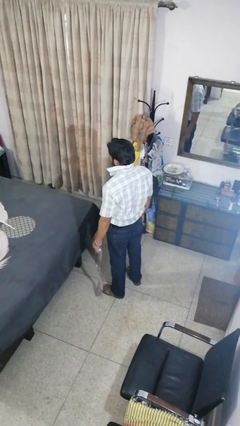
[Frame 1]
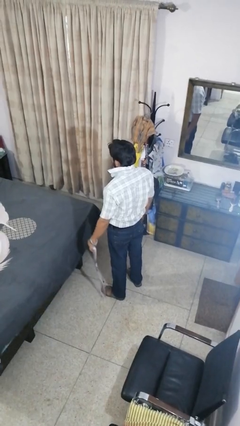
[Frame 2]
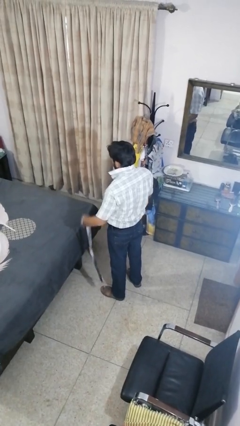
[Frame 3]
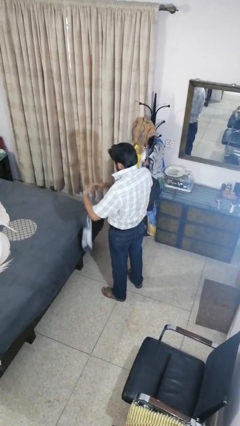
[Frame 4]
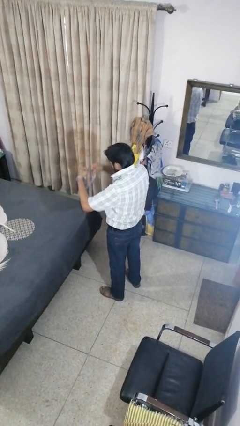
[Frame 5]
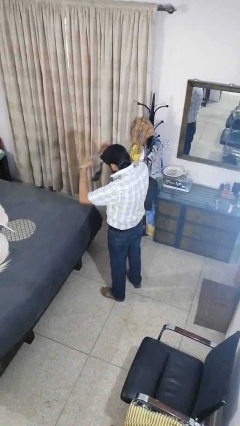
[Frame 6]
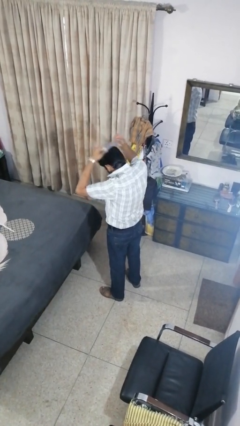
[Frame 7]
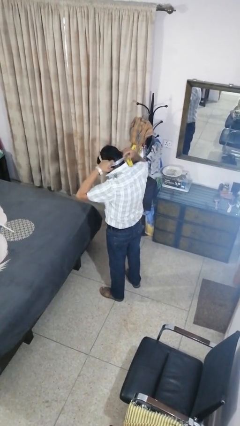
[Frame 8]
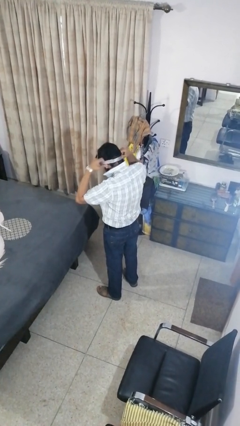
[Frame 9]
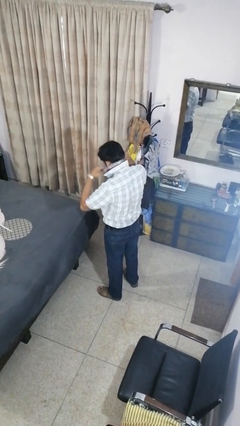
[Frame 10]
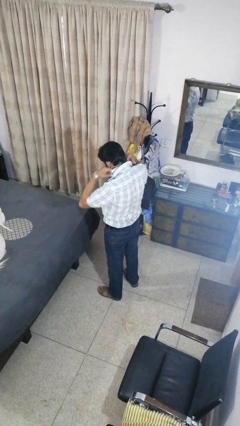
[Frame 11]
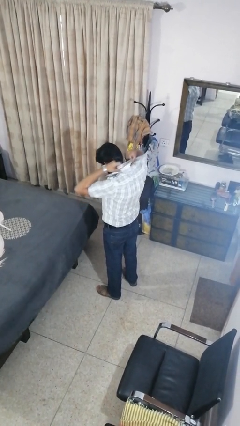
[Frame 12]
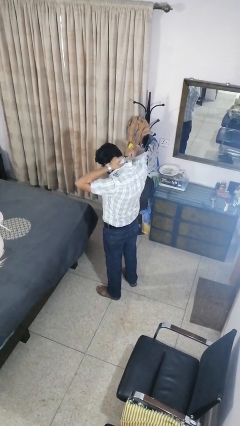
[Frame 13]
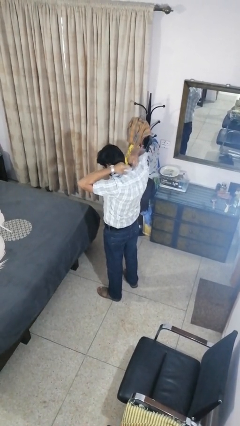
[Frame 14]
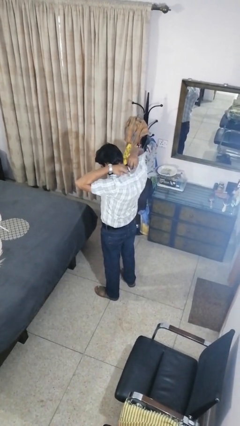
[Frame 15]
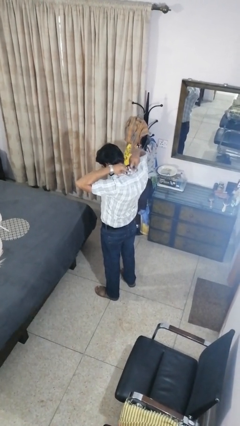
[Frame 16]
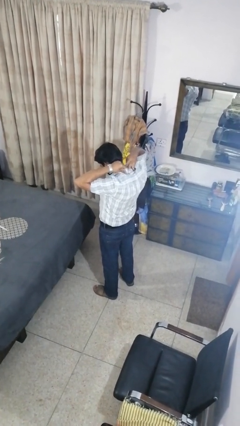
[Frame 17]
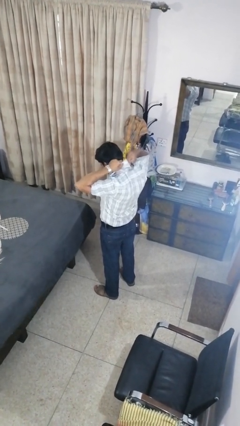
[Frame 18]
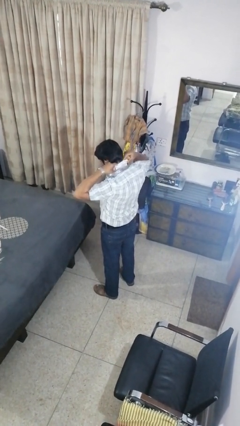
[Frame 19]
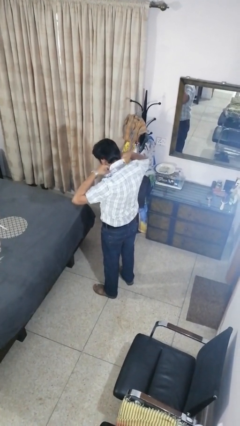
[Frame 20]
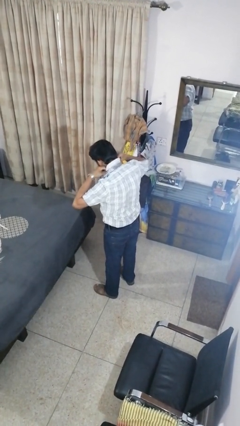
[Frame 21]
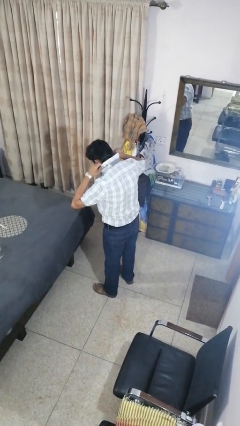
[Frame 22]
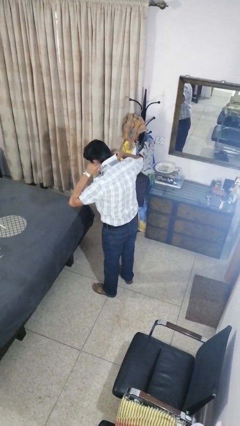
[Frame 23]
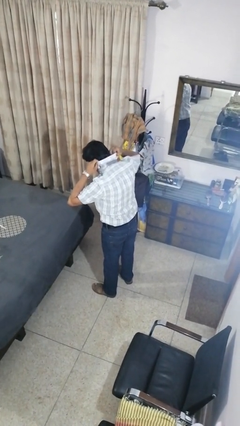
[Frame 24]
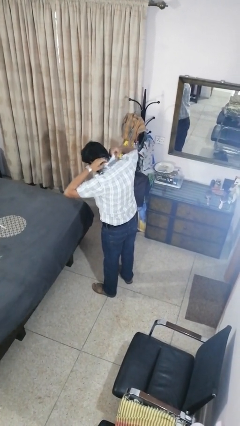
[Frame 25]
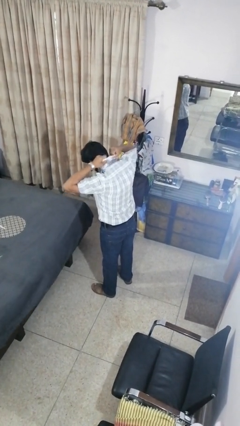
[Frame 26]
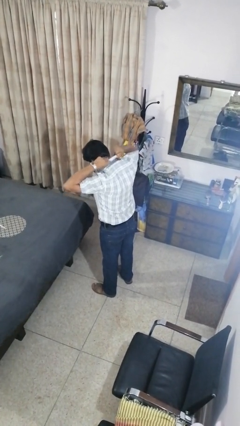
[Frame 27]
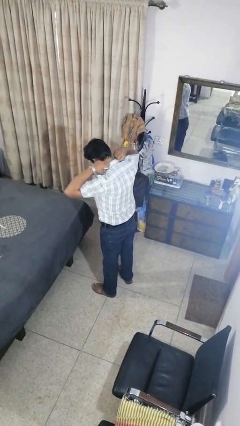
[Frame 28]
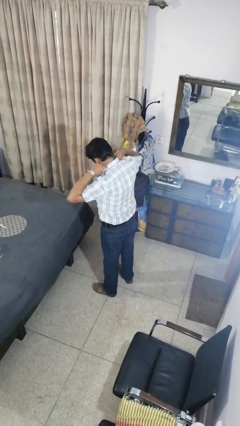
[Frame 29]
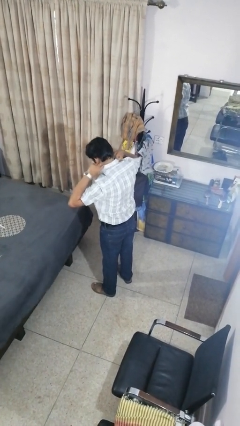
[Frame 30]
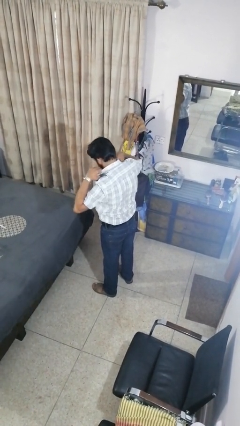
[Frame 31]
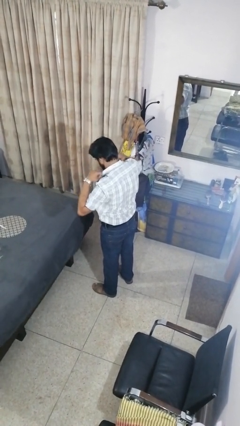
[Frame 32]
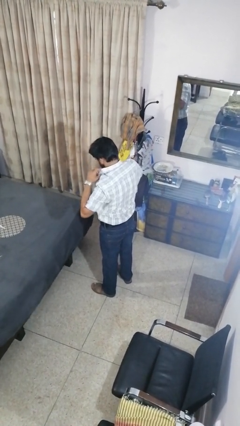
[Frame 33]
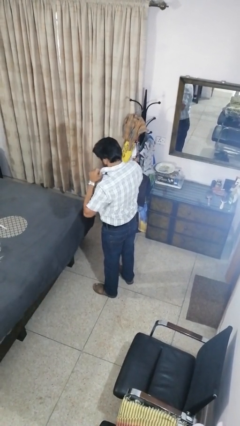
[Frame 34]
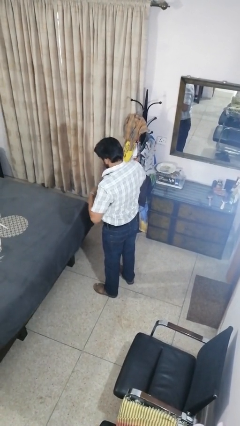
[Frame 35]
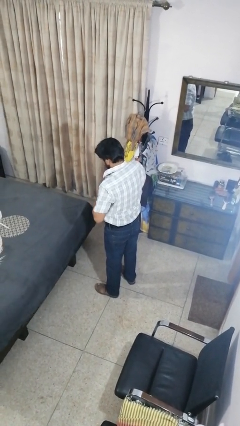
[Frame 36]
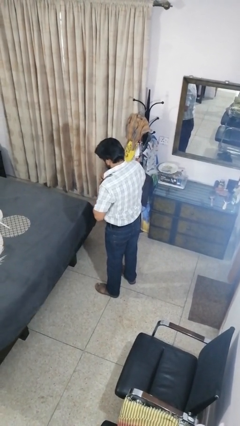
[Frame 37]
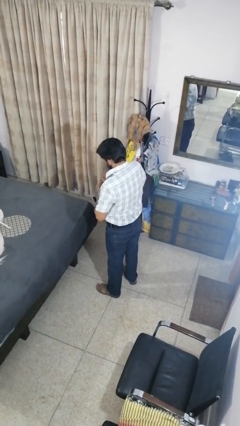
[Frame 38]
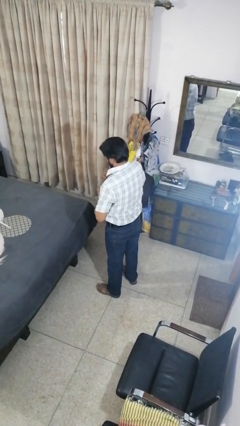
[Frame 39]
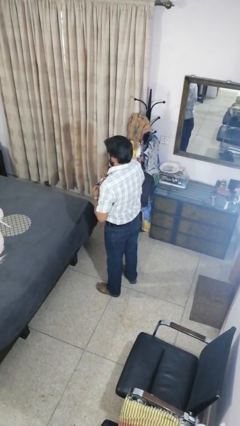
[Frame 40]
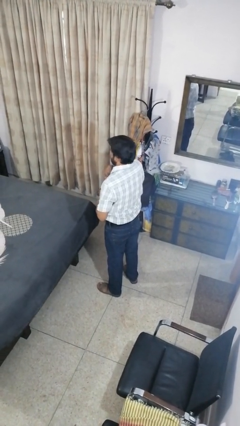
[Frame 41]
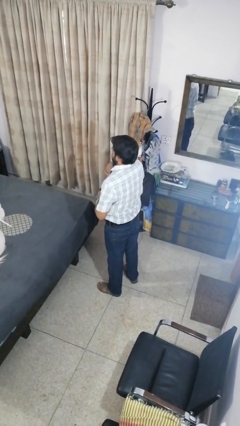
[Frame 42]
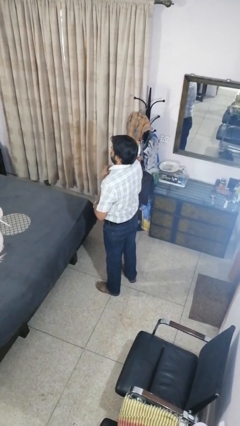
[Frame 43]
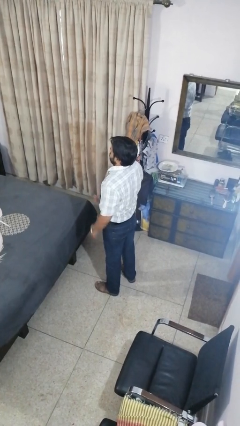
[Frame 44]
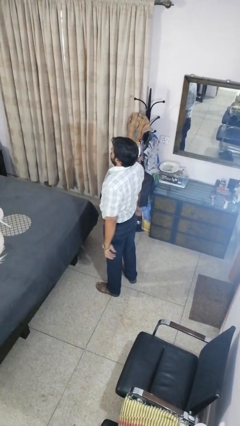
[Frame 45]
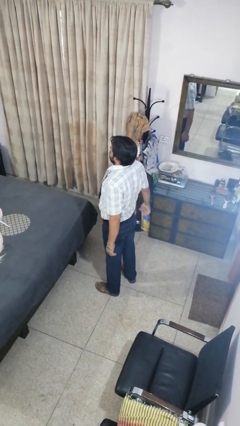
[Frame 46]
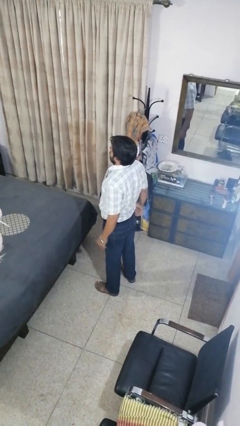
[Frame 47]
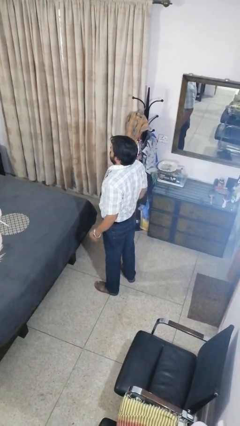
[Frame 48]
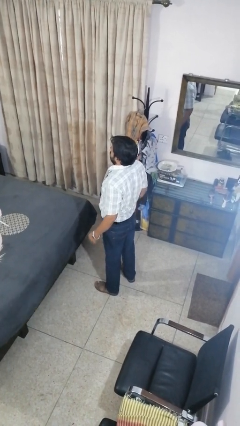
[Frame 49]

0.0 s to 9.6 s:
person puts on necktie

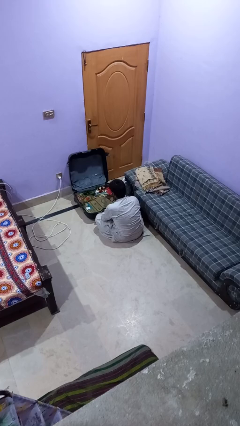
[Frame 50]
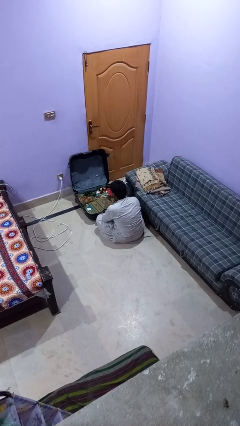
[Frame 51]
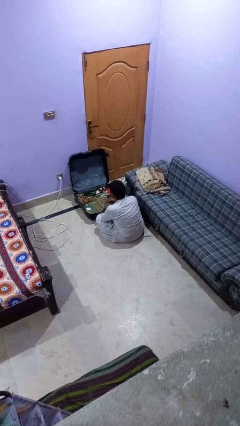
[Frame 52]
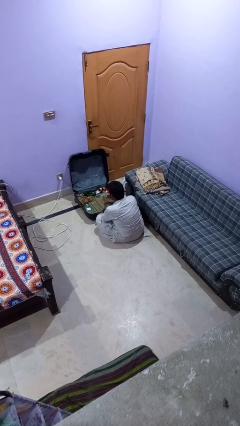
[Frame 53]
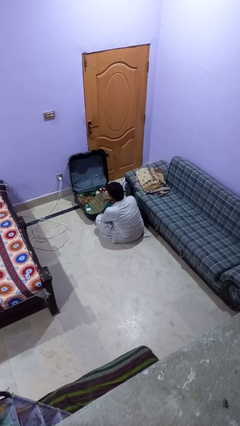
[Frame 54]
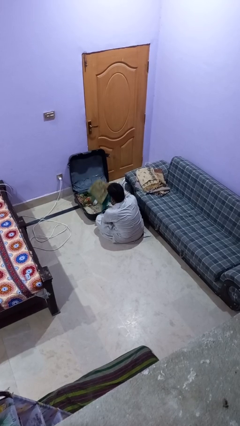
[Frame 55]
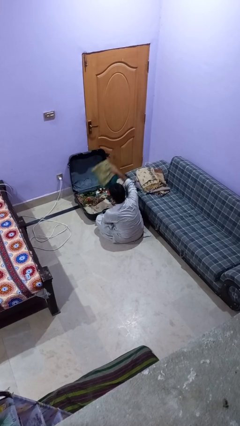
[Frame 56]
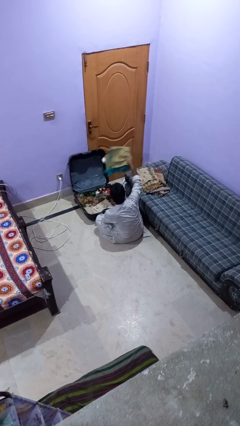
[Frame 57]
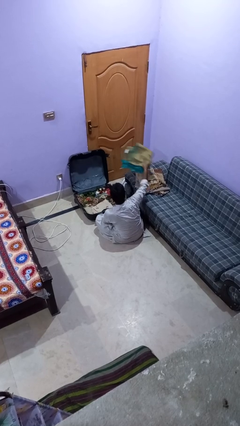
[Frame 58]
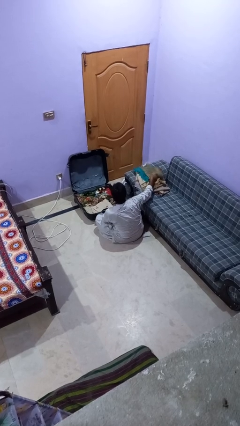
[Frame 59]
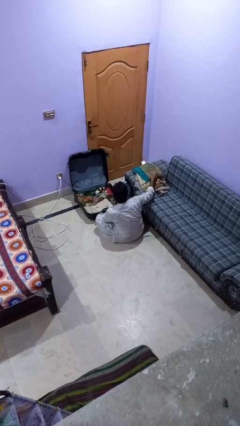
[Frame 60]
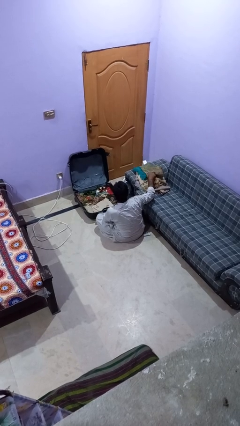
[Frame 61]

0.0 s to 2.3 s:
person unloads clothes from suitcase

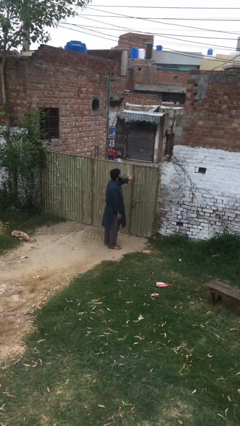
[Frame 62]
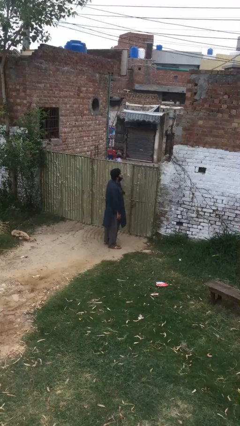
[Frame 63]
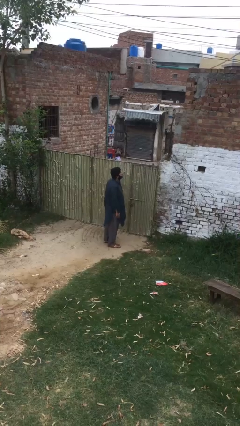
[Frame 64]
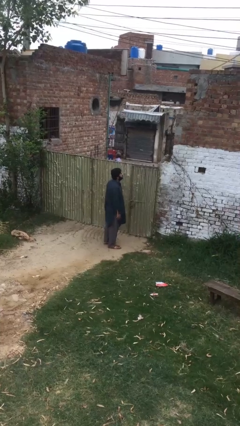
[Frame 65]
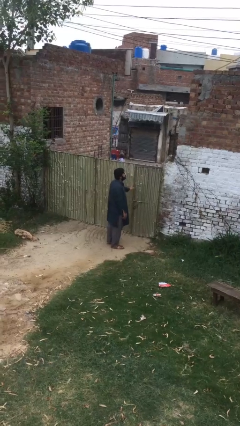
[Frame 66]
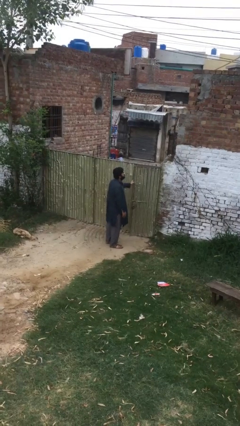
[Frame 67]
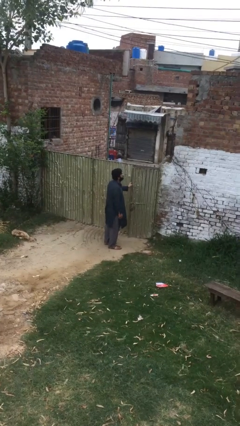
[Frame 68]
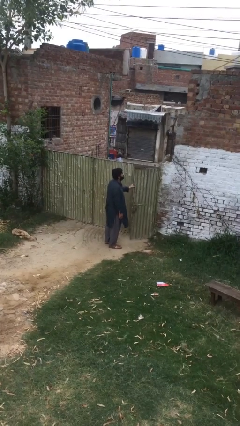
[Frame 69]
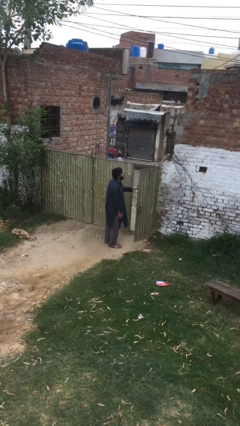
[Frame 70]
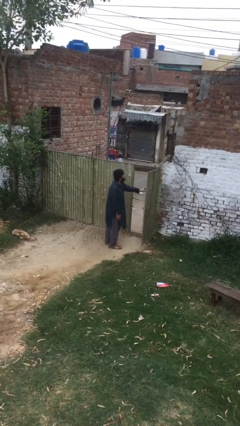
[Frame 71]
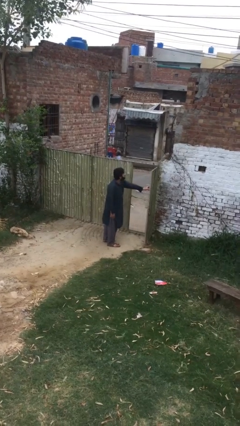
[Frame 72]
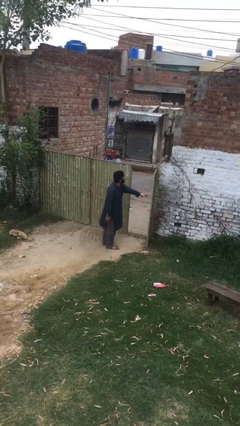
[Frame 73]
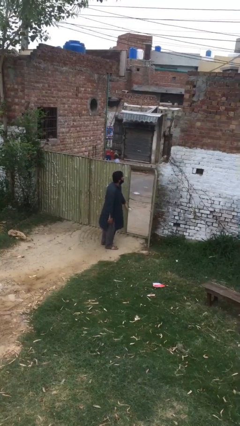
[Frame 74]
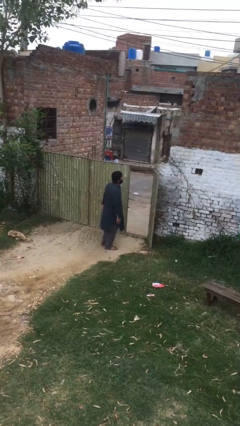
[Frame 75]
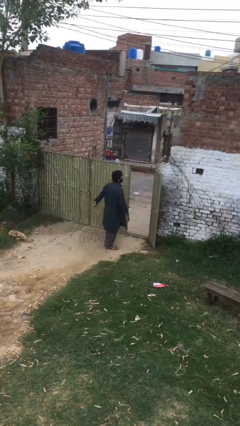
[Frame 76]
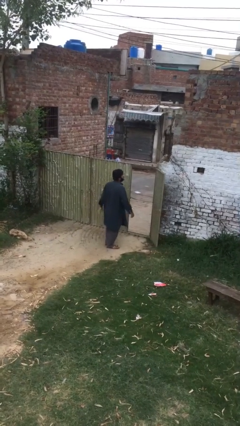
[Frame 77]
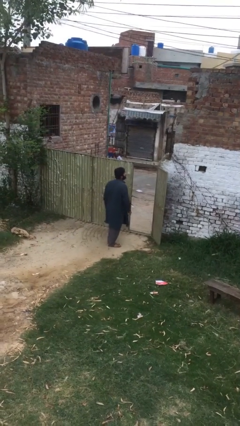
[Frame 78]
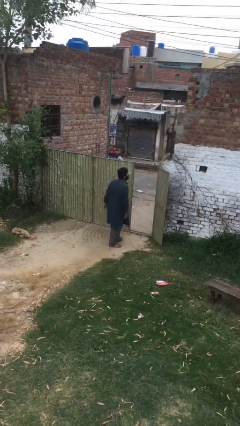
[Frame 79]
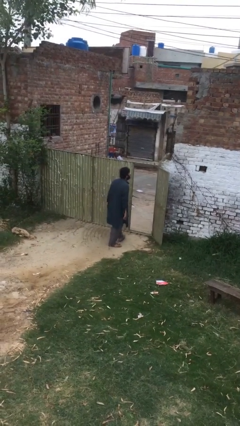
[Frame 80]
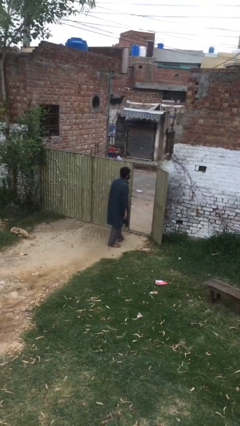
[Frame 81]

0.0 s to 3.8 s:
person opens facility door

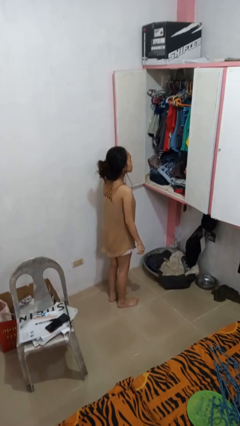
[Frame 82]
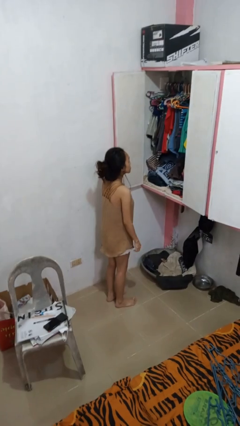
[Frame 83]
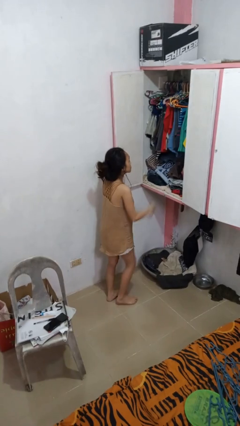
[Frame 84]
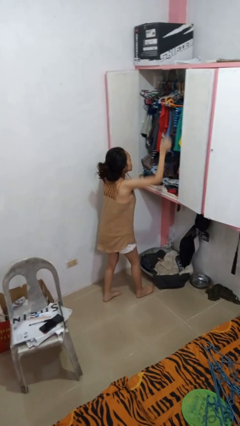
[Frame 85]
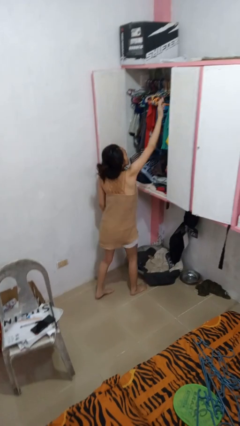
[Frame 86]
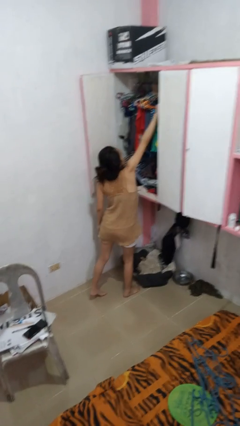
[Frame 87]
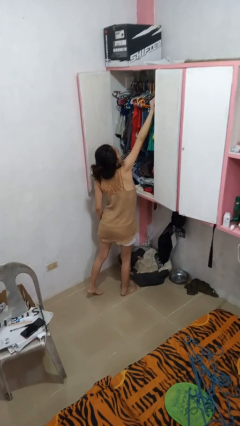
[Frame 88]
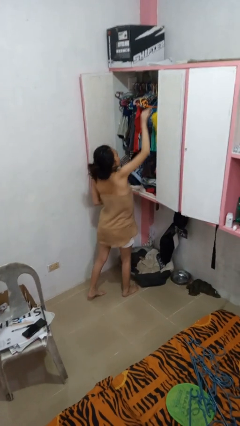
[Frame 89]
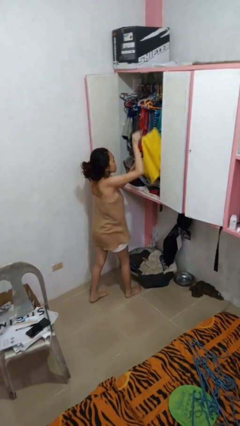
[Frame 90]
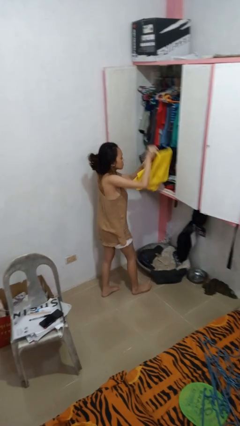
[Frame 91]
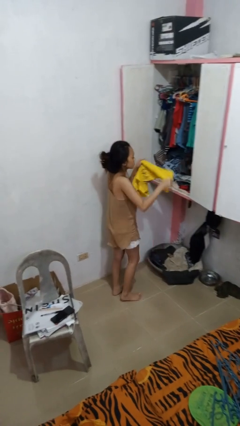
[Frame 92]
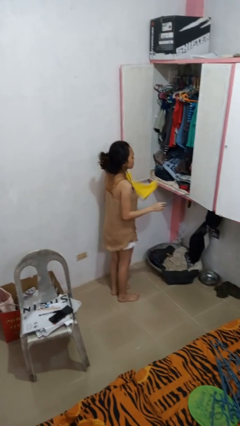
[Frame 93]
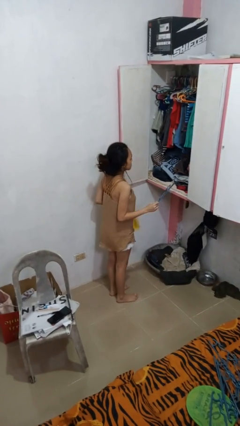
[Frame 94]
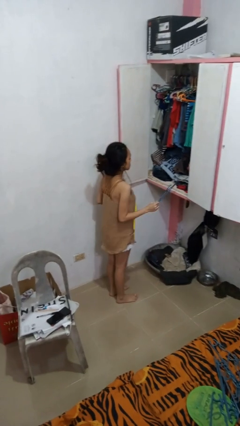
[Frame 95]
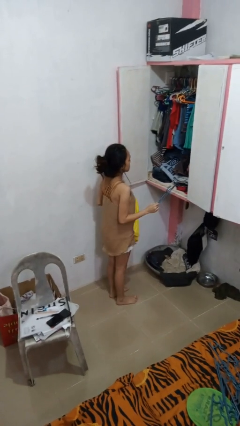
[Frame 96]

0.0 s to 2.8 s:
person takes clothes from closet
